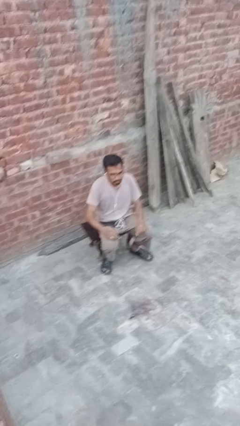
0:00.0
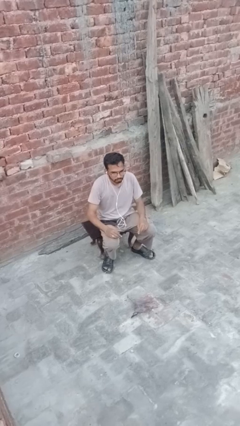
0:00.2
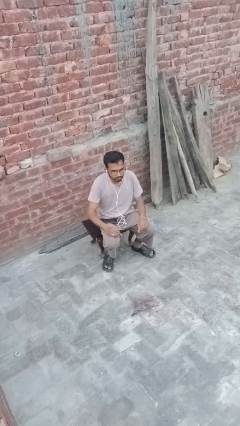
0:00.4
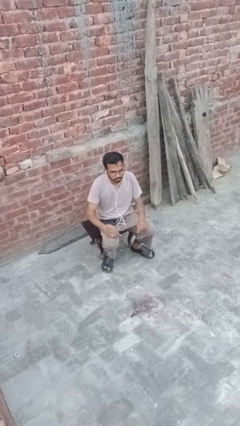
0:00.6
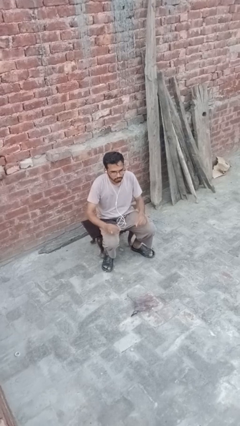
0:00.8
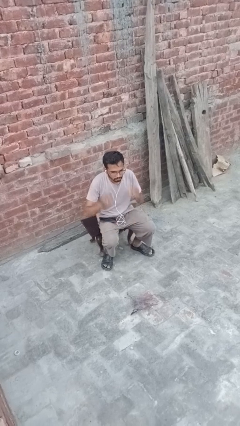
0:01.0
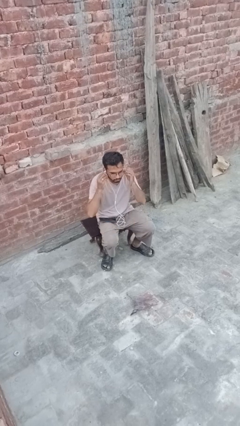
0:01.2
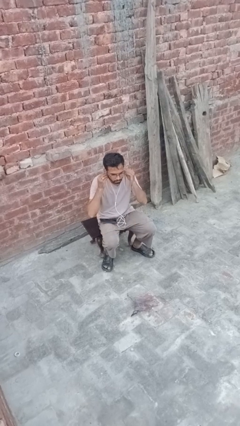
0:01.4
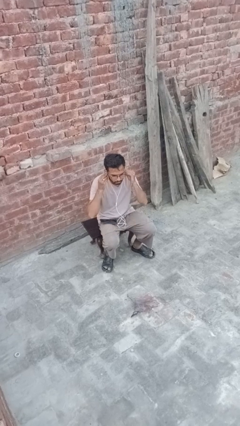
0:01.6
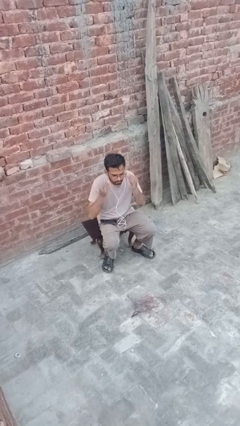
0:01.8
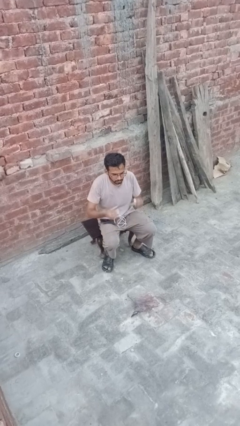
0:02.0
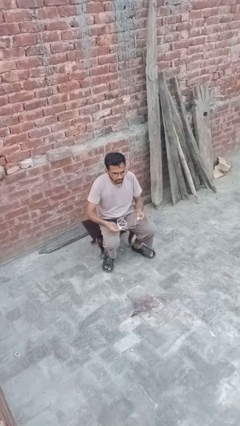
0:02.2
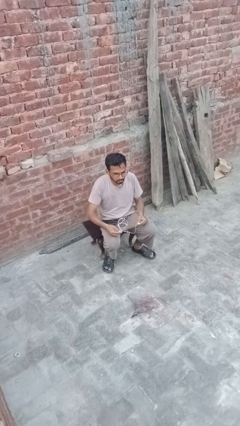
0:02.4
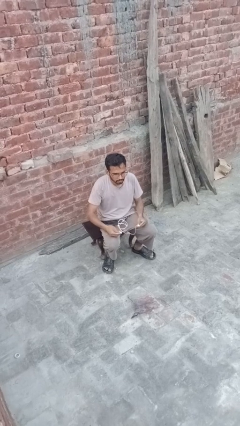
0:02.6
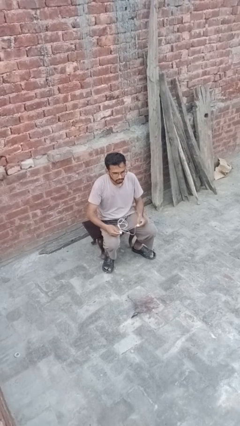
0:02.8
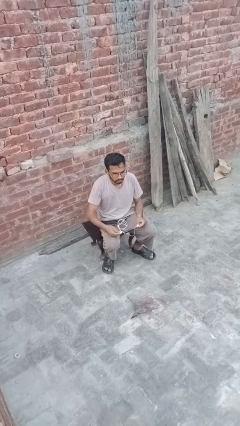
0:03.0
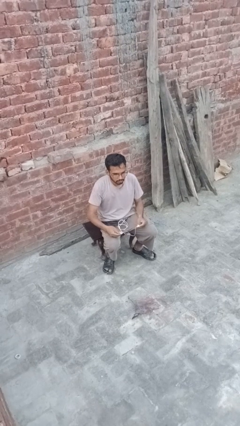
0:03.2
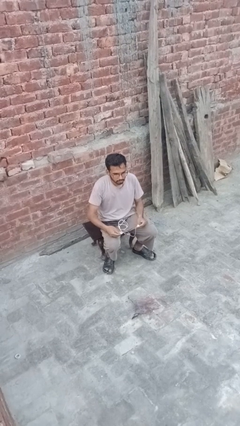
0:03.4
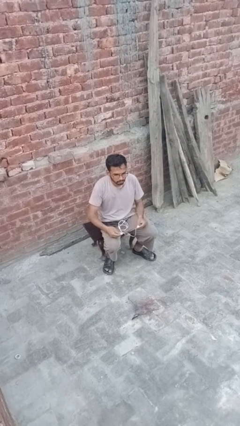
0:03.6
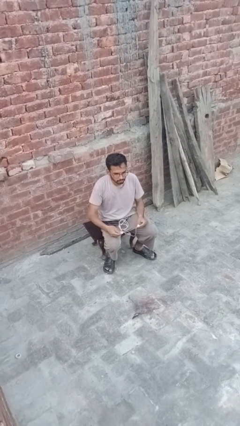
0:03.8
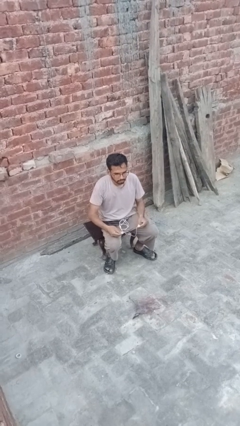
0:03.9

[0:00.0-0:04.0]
person takes off headphones

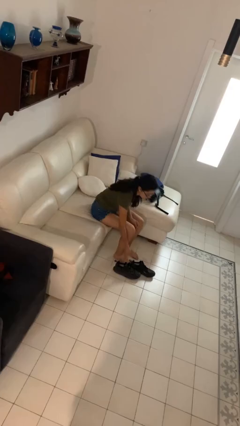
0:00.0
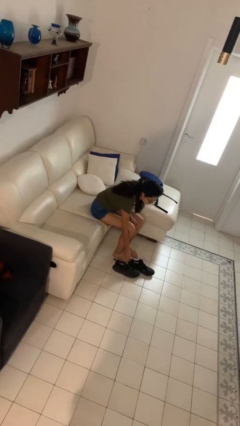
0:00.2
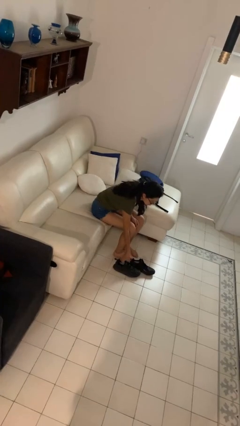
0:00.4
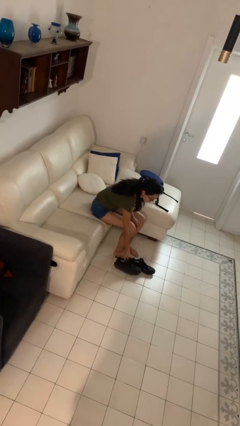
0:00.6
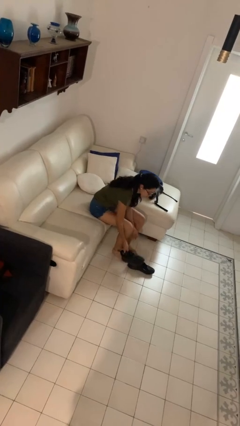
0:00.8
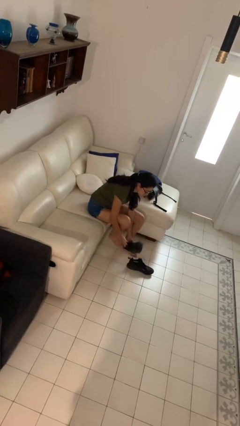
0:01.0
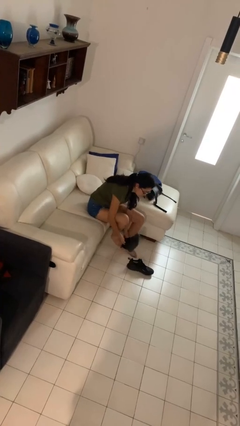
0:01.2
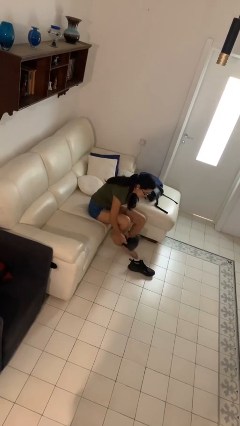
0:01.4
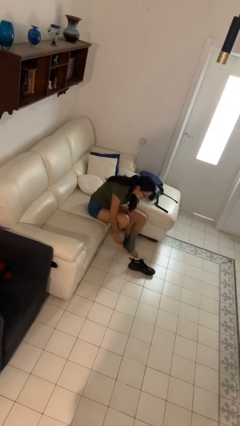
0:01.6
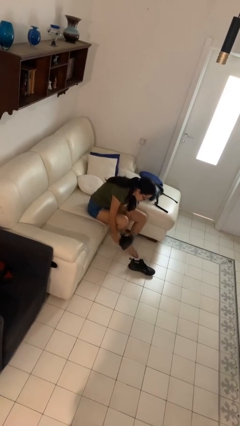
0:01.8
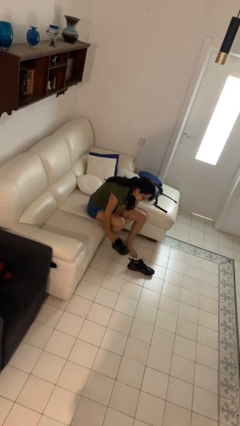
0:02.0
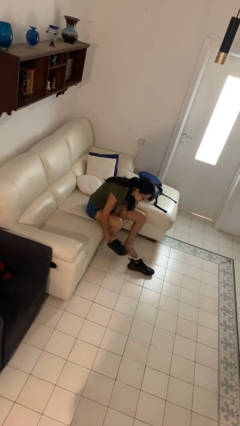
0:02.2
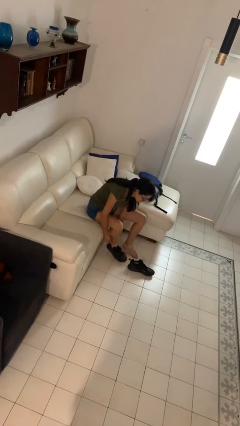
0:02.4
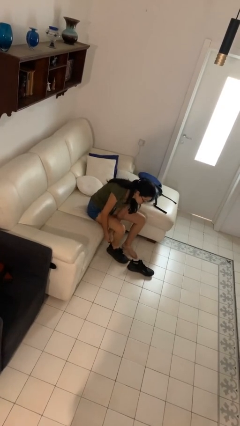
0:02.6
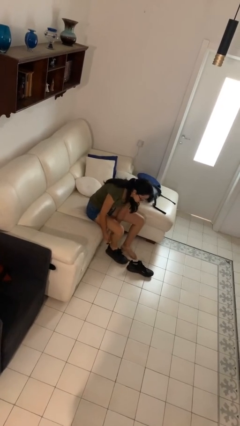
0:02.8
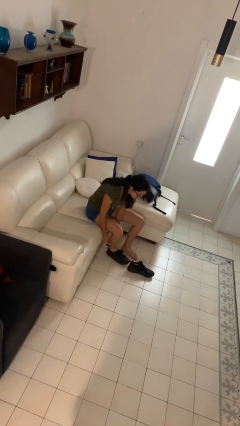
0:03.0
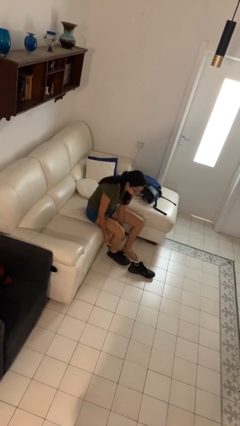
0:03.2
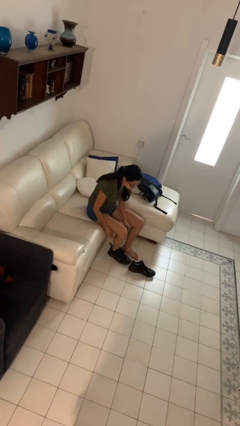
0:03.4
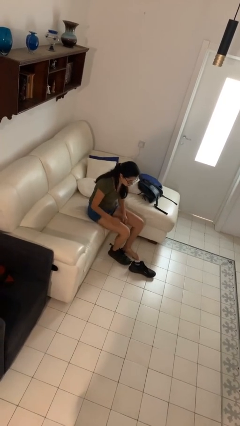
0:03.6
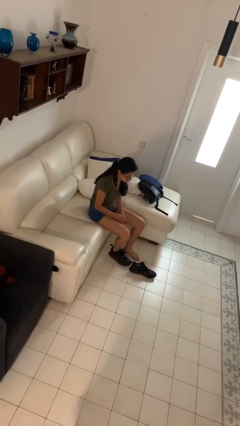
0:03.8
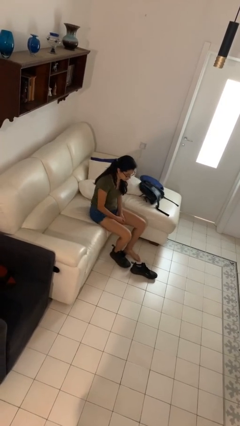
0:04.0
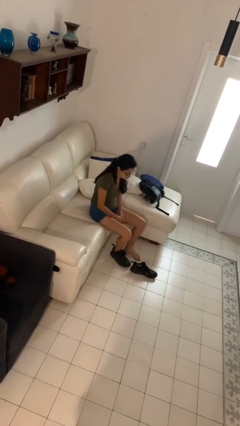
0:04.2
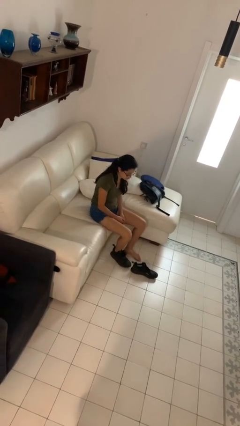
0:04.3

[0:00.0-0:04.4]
person puts on shoes

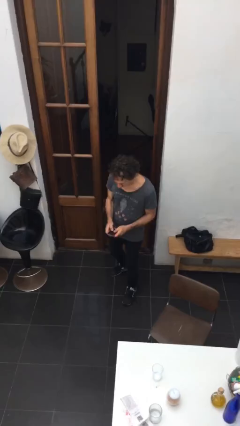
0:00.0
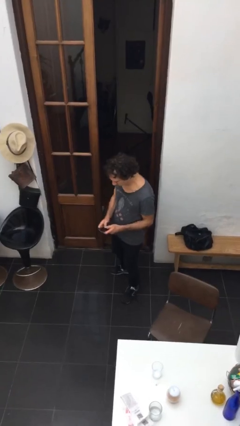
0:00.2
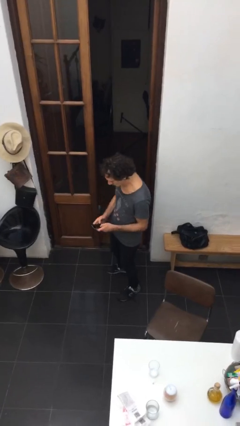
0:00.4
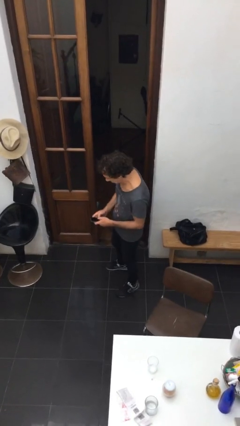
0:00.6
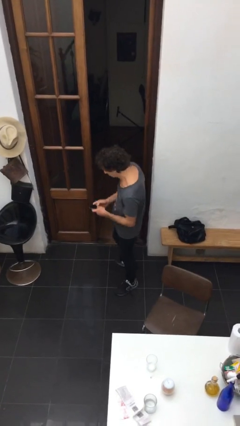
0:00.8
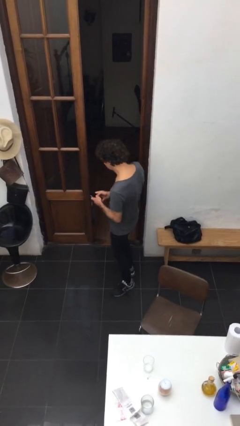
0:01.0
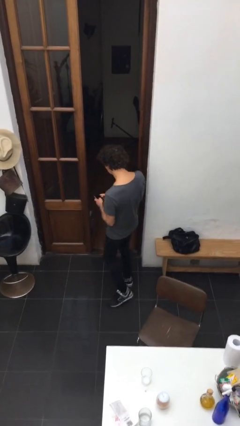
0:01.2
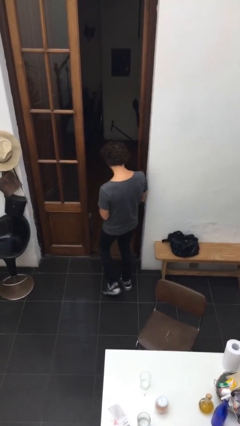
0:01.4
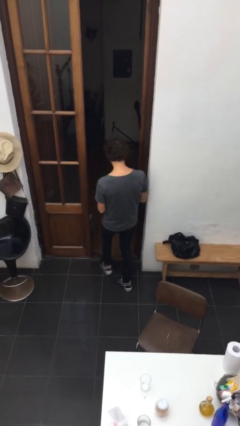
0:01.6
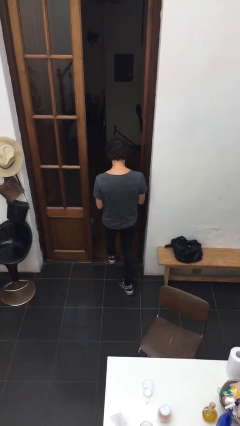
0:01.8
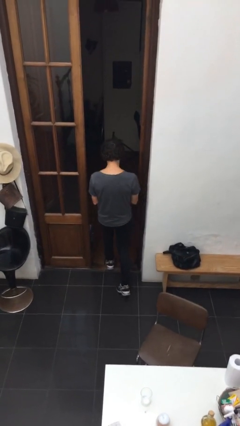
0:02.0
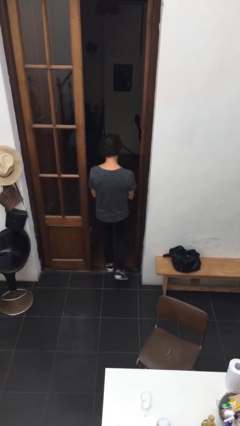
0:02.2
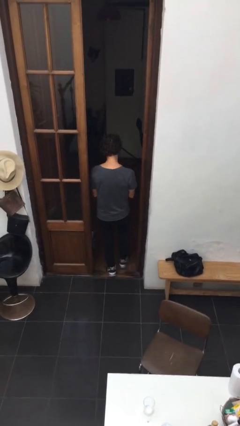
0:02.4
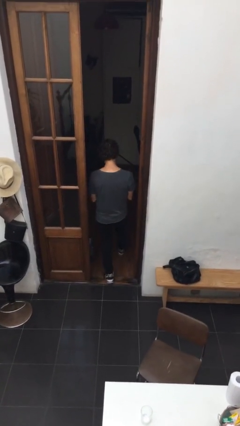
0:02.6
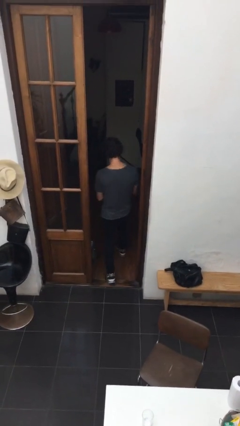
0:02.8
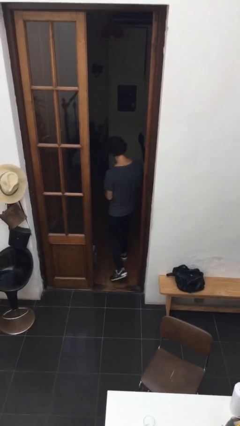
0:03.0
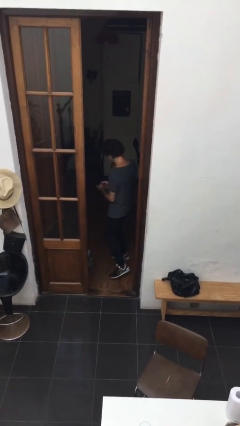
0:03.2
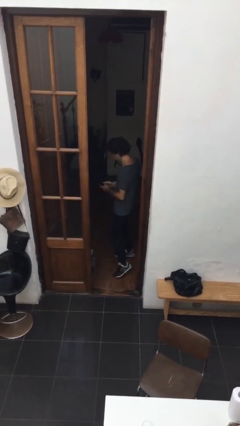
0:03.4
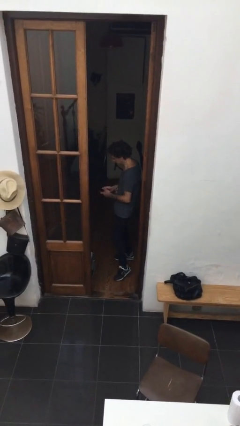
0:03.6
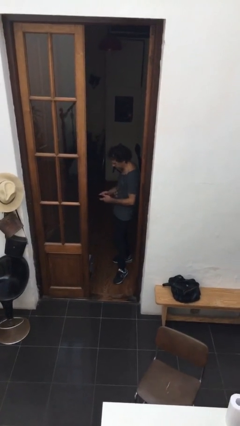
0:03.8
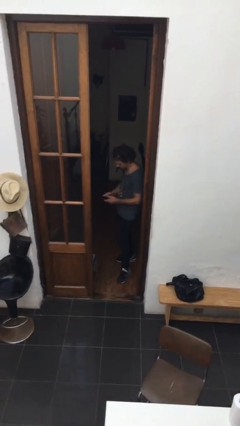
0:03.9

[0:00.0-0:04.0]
person exits scene through structure

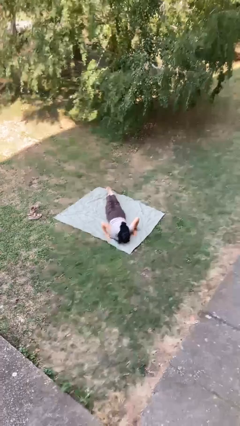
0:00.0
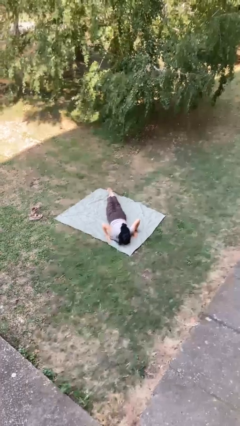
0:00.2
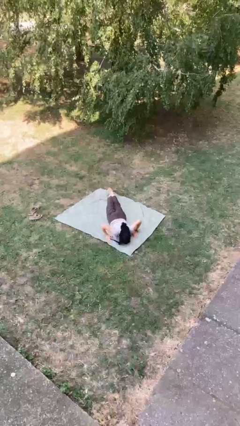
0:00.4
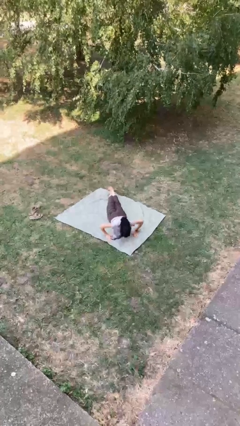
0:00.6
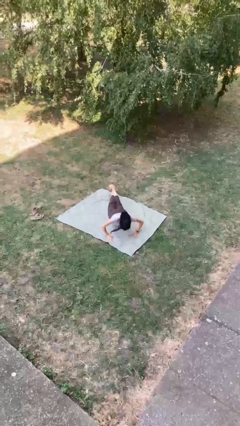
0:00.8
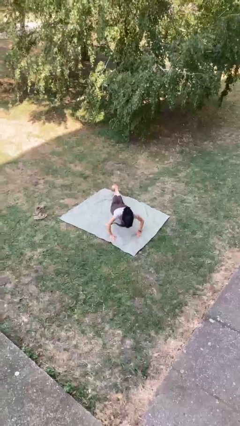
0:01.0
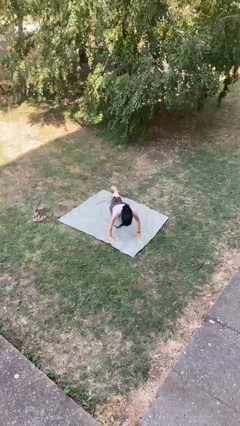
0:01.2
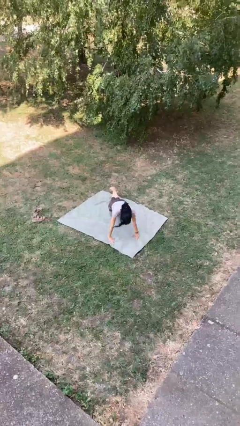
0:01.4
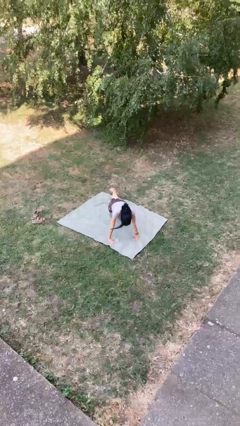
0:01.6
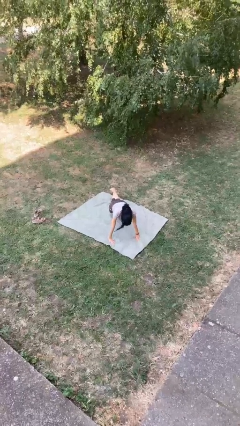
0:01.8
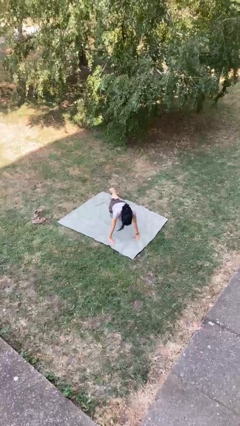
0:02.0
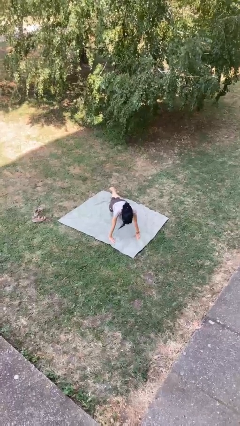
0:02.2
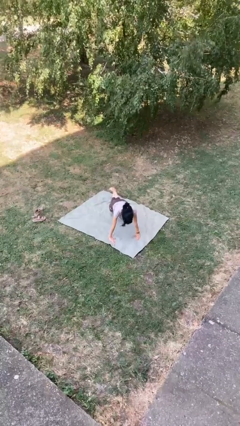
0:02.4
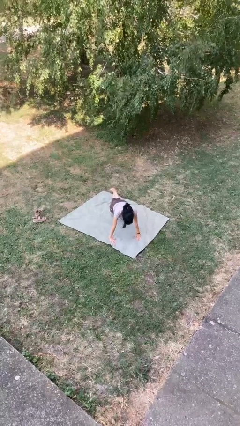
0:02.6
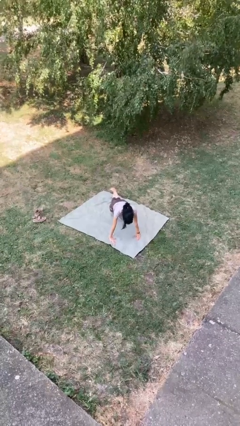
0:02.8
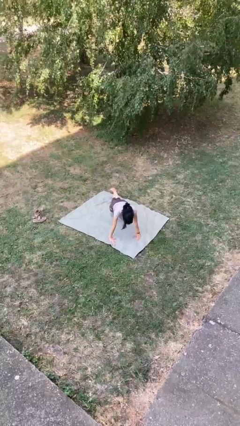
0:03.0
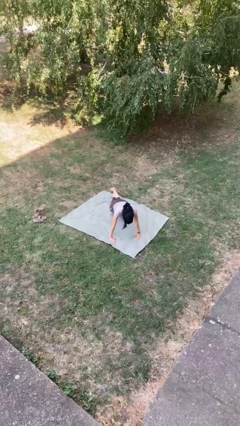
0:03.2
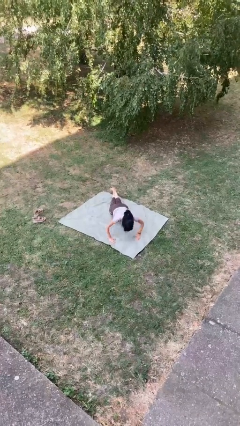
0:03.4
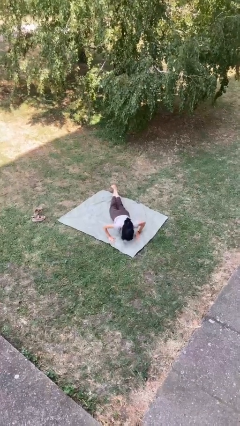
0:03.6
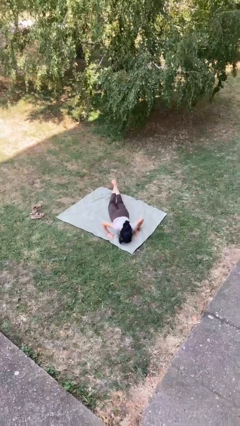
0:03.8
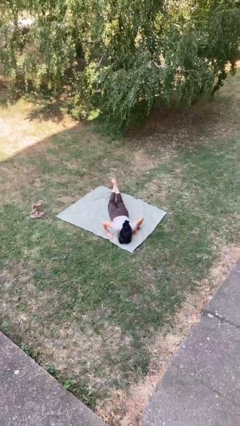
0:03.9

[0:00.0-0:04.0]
person exercises with pushup

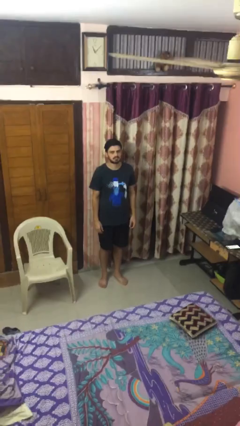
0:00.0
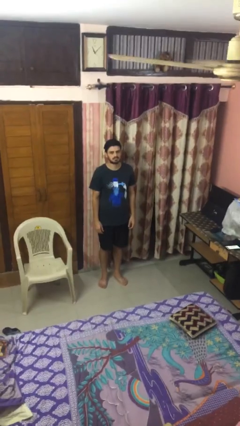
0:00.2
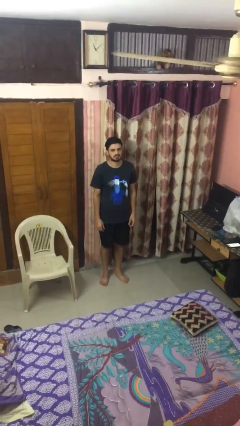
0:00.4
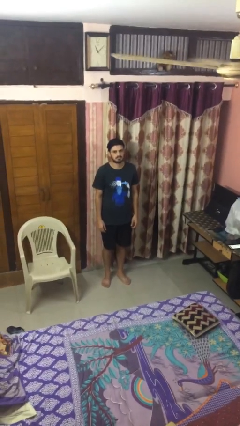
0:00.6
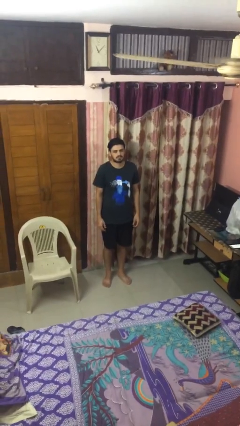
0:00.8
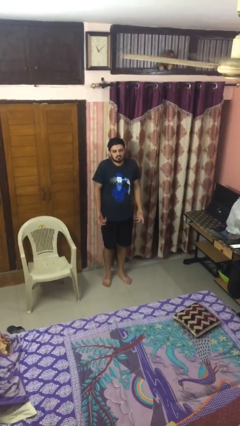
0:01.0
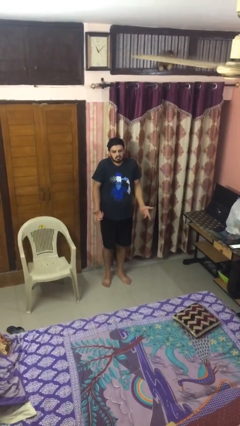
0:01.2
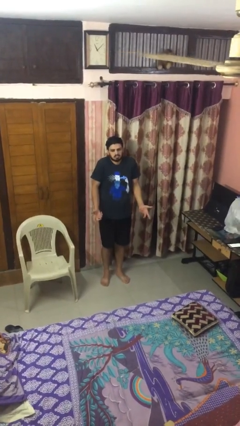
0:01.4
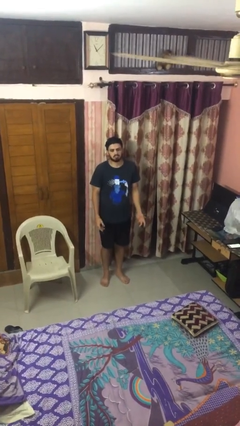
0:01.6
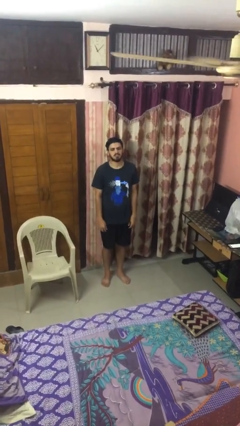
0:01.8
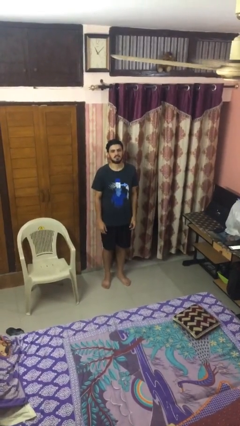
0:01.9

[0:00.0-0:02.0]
person shrugs
